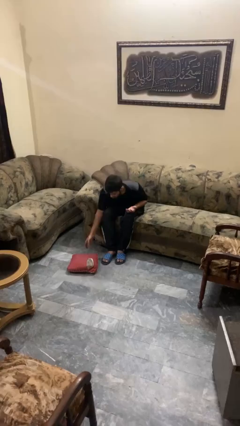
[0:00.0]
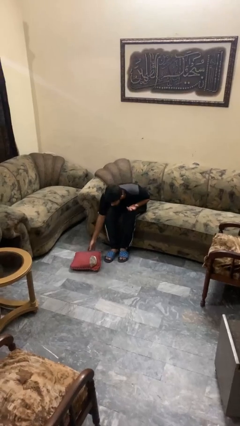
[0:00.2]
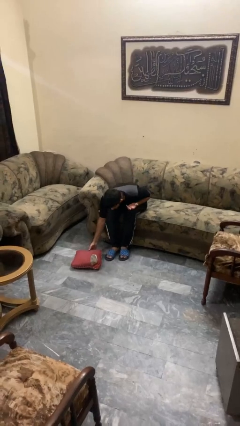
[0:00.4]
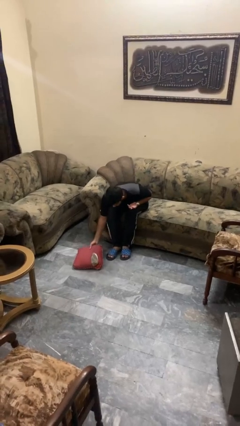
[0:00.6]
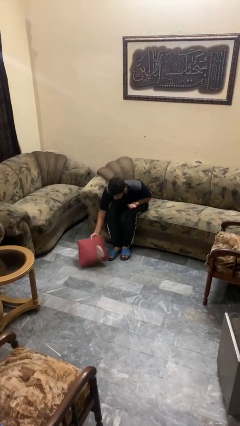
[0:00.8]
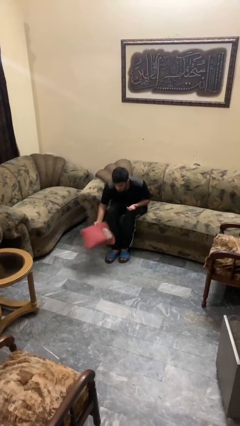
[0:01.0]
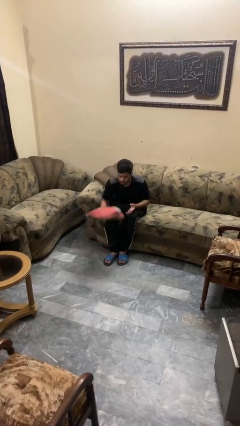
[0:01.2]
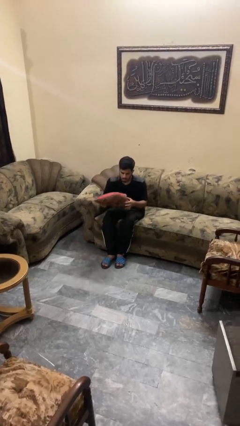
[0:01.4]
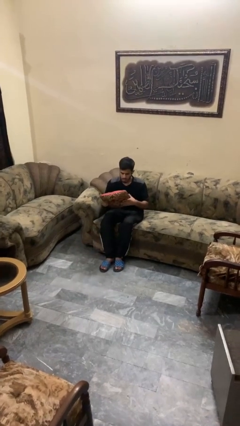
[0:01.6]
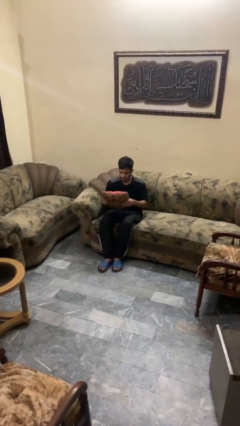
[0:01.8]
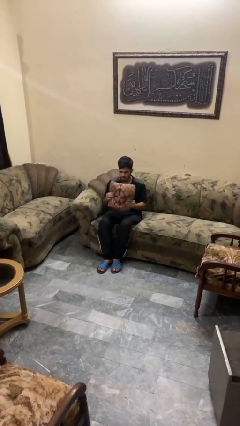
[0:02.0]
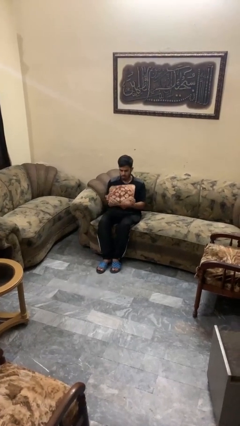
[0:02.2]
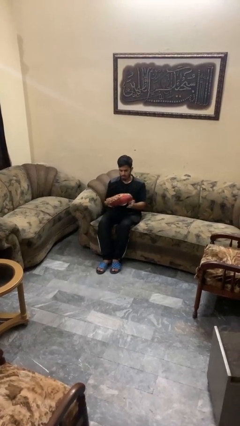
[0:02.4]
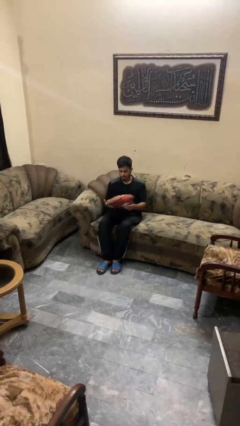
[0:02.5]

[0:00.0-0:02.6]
person picks up object from floor

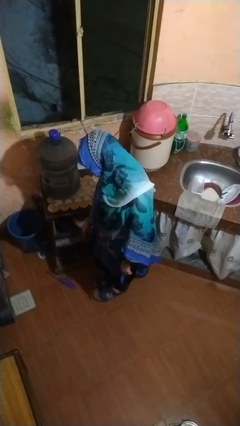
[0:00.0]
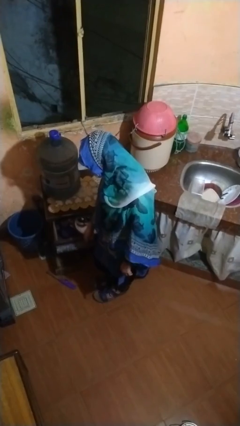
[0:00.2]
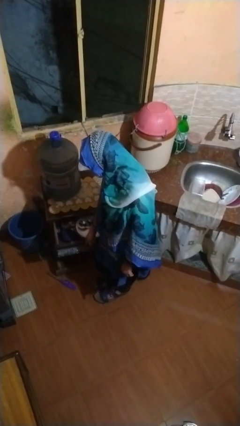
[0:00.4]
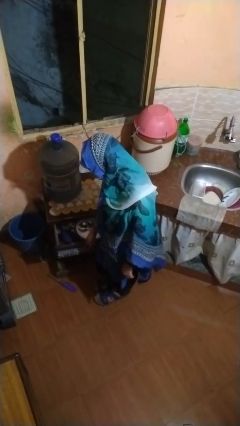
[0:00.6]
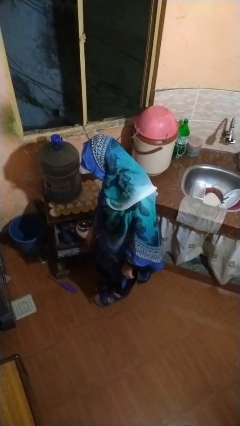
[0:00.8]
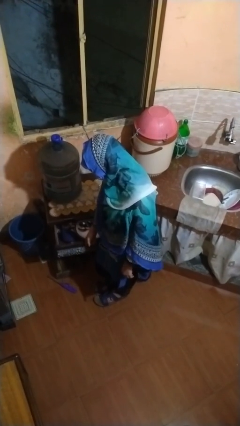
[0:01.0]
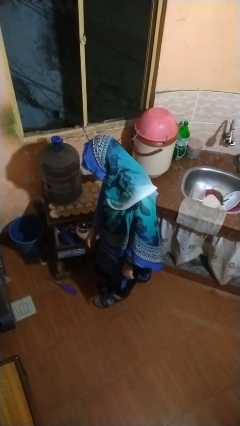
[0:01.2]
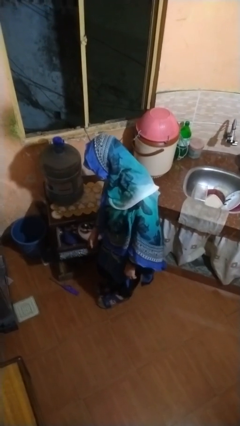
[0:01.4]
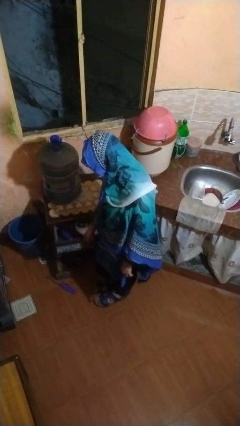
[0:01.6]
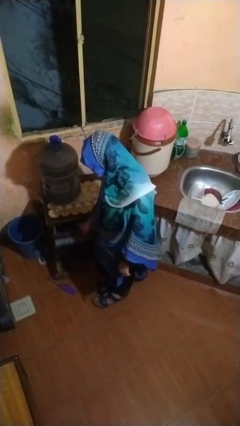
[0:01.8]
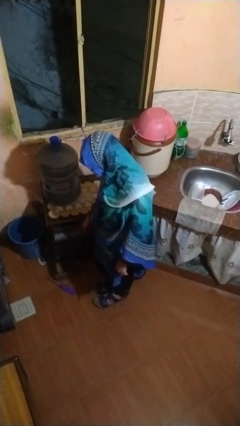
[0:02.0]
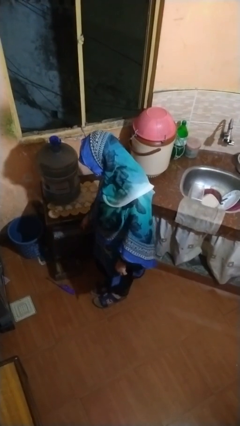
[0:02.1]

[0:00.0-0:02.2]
person opens kitchen drawer

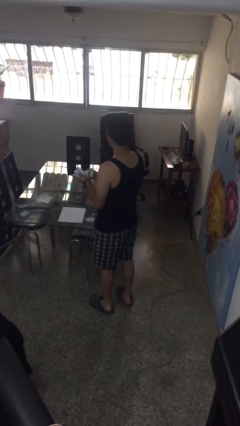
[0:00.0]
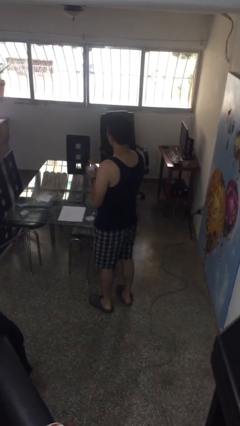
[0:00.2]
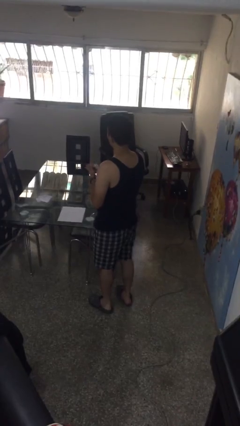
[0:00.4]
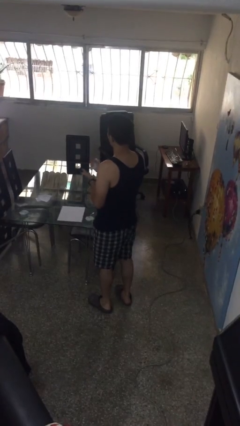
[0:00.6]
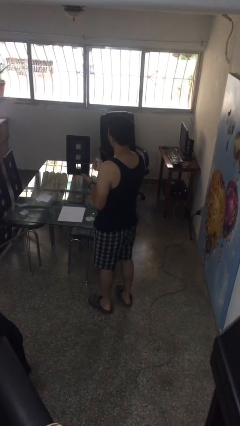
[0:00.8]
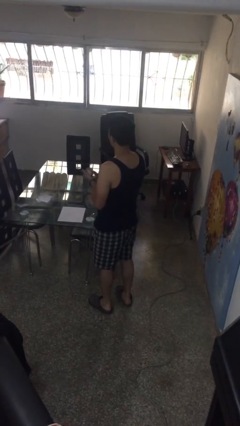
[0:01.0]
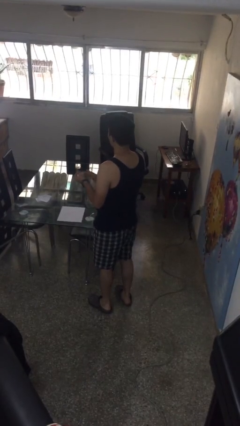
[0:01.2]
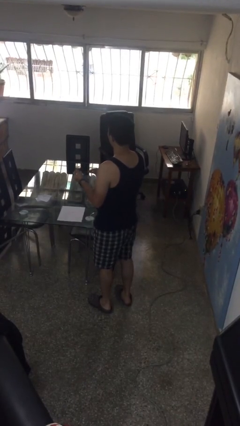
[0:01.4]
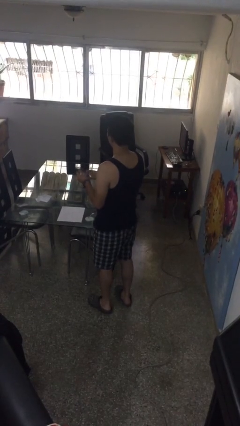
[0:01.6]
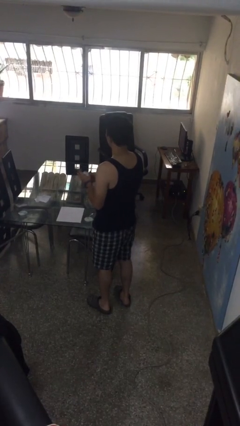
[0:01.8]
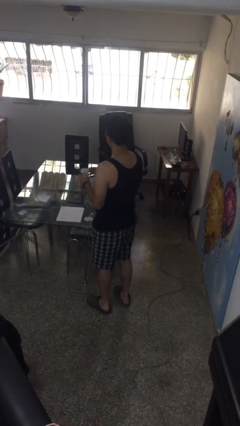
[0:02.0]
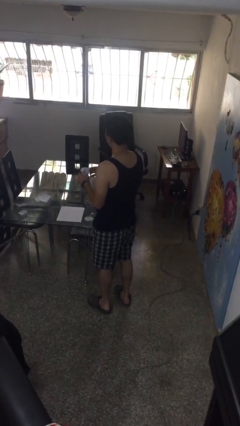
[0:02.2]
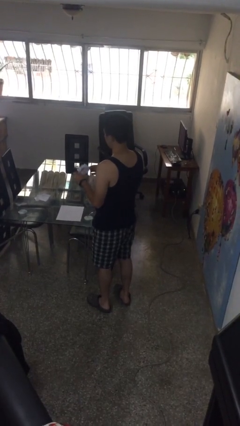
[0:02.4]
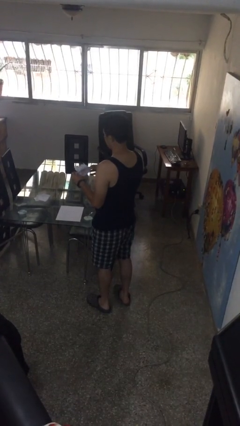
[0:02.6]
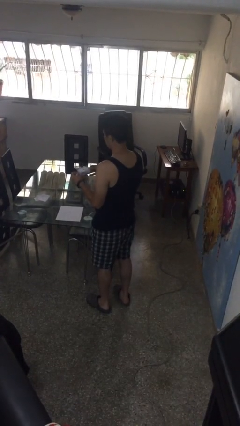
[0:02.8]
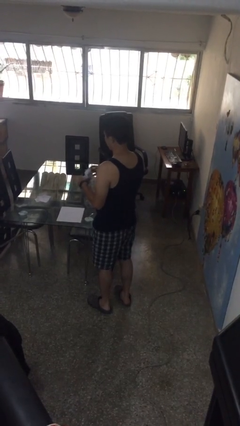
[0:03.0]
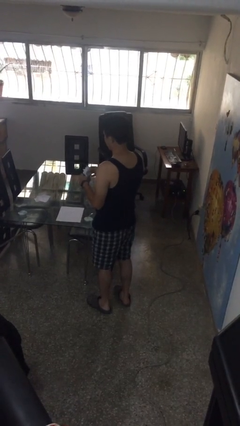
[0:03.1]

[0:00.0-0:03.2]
person crumples paper

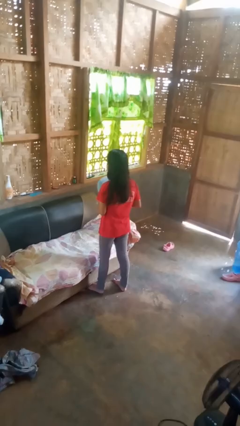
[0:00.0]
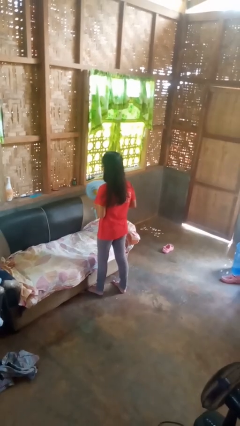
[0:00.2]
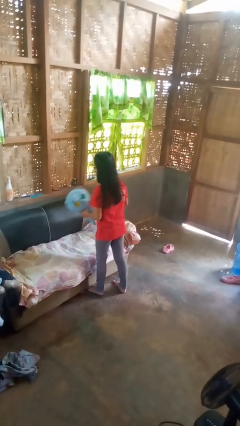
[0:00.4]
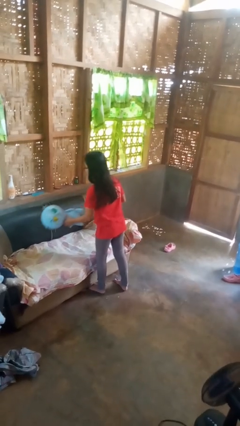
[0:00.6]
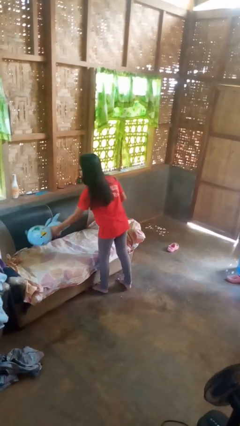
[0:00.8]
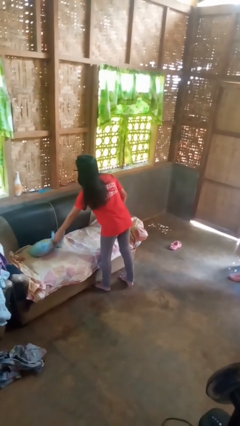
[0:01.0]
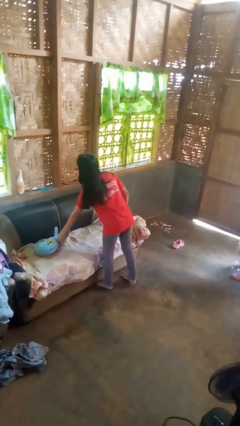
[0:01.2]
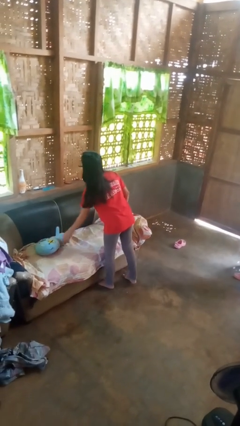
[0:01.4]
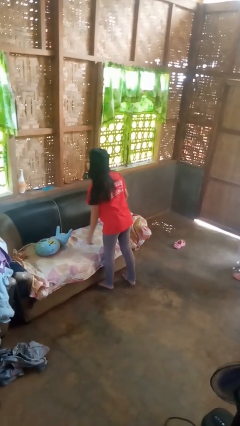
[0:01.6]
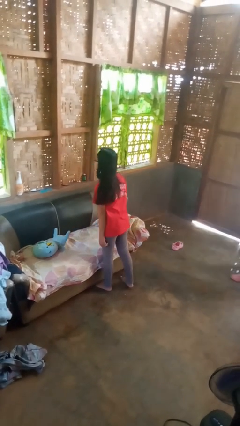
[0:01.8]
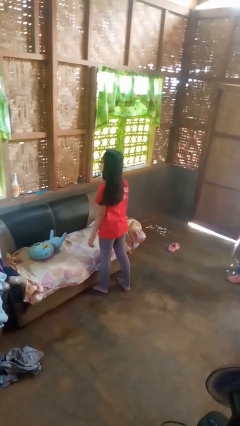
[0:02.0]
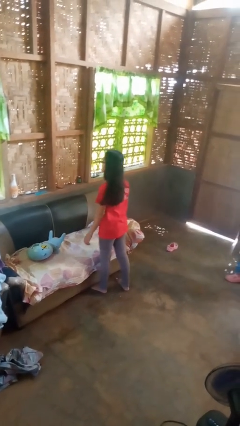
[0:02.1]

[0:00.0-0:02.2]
person puts down object on couch

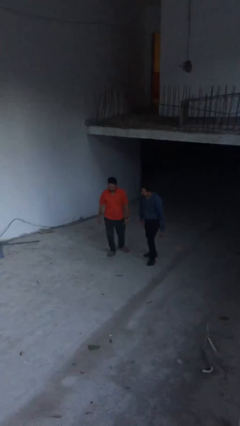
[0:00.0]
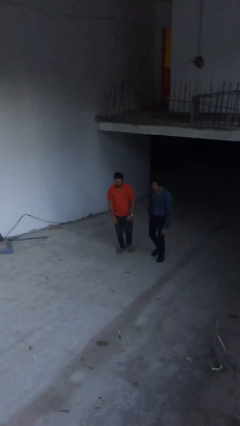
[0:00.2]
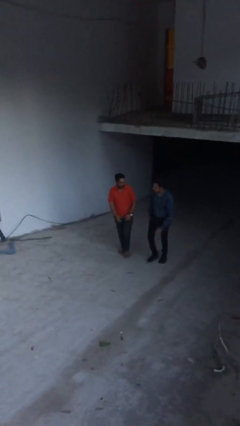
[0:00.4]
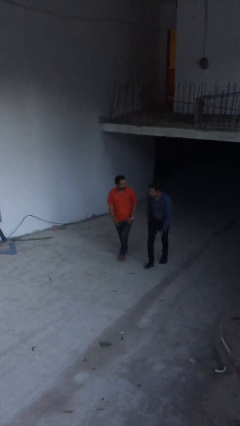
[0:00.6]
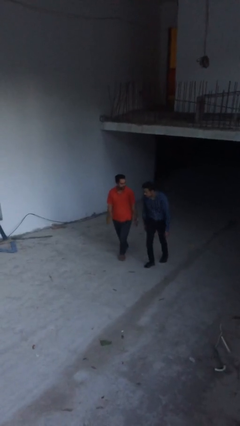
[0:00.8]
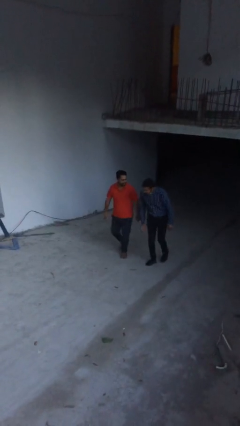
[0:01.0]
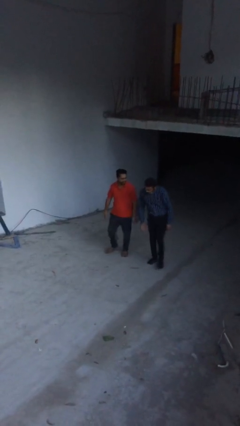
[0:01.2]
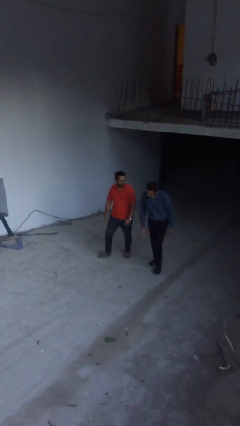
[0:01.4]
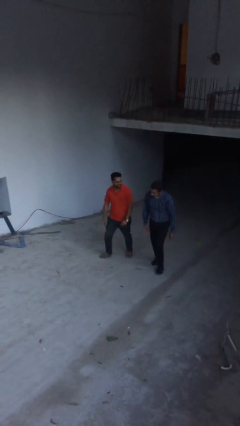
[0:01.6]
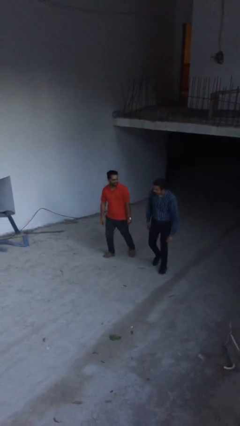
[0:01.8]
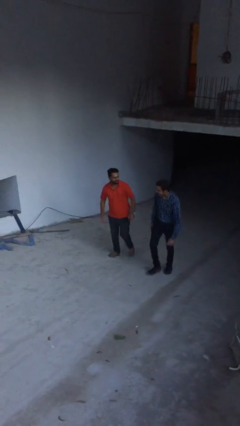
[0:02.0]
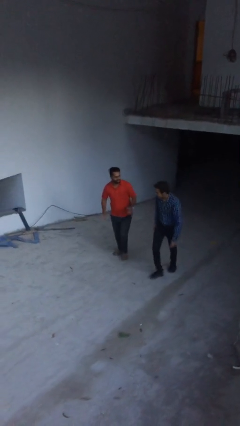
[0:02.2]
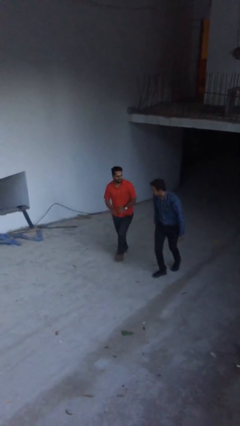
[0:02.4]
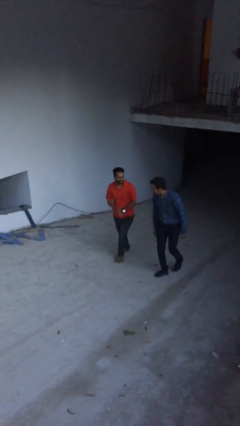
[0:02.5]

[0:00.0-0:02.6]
person talks to person

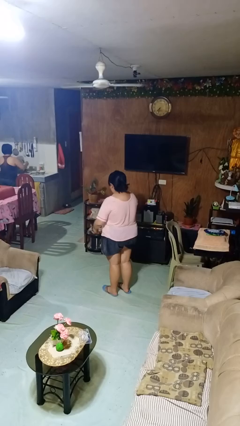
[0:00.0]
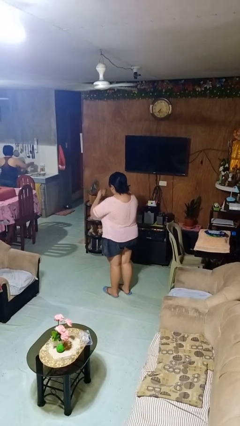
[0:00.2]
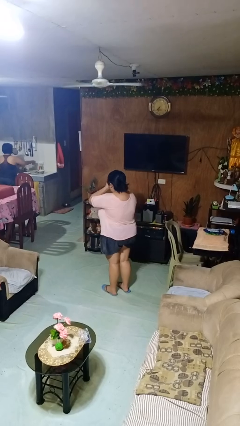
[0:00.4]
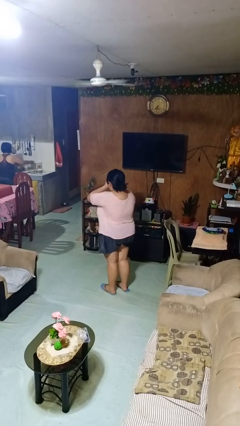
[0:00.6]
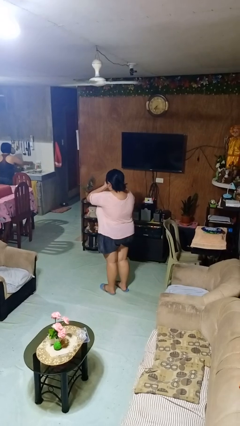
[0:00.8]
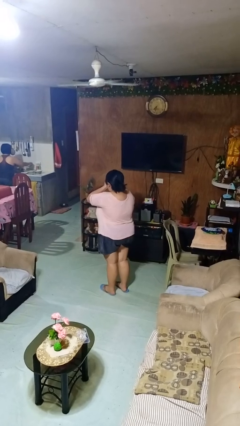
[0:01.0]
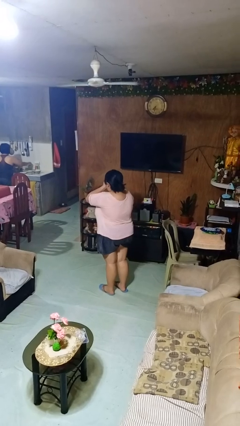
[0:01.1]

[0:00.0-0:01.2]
person yawns

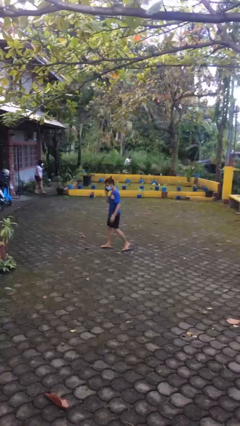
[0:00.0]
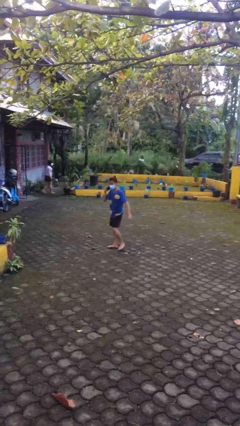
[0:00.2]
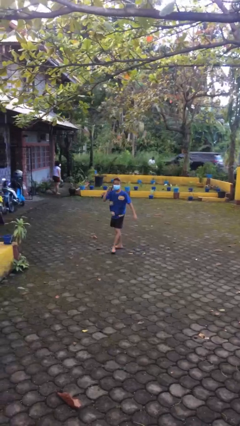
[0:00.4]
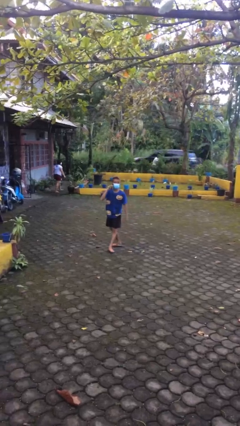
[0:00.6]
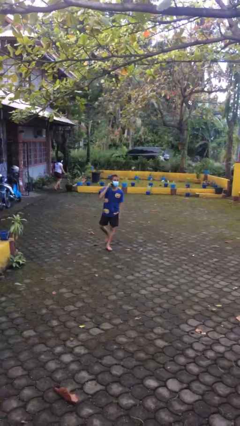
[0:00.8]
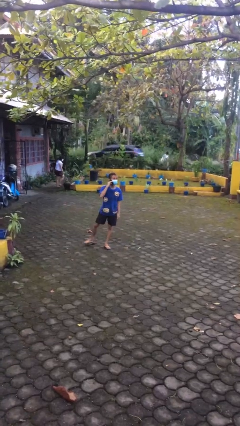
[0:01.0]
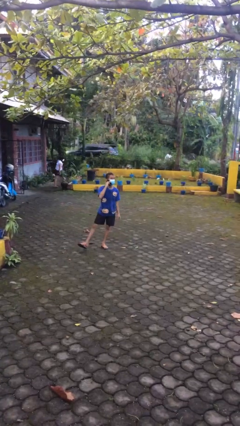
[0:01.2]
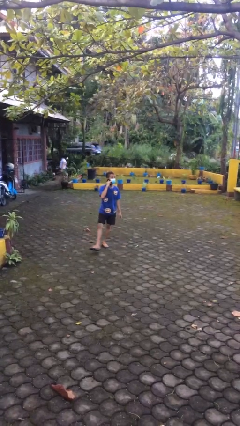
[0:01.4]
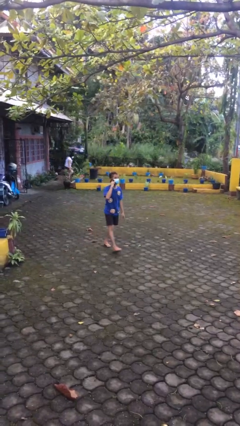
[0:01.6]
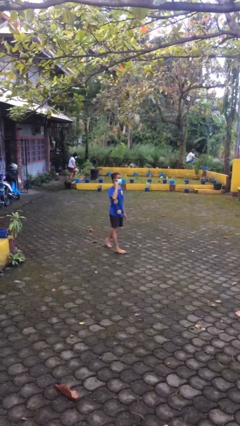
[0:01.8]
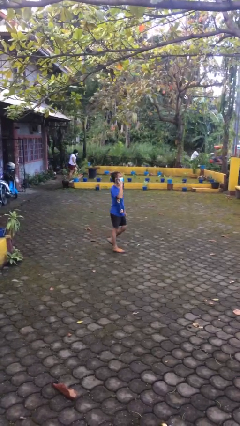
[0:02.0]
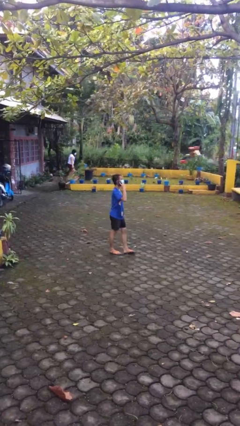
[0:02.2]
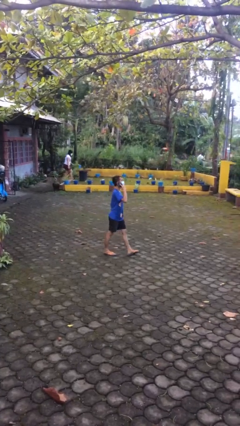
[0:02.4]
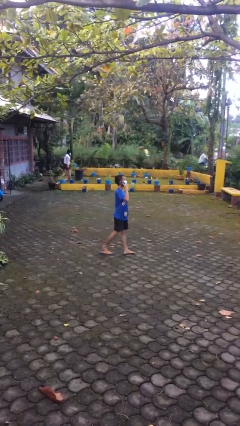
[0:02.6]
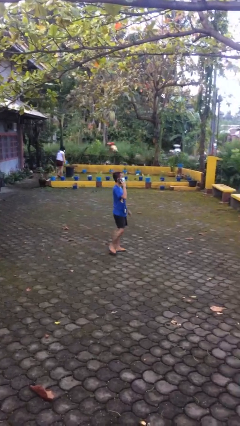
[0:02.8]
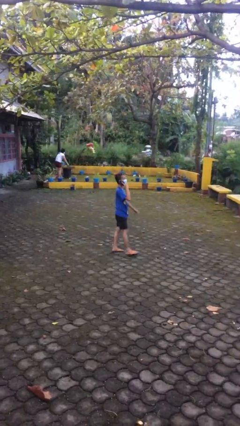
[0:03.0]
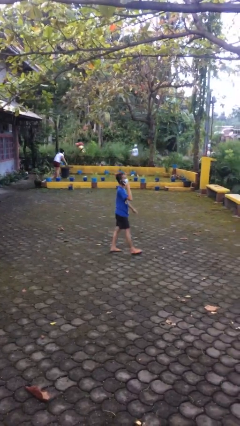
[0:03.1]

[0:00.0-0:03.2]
person talks on phone
